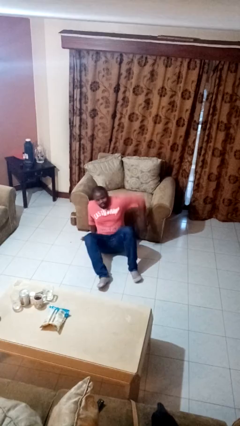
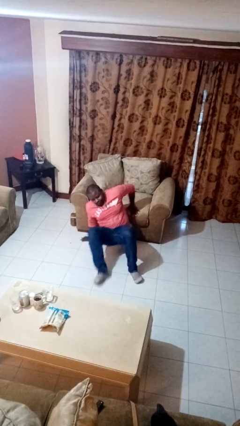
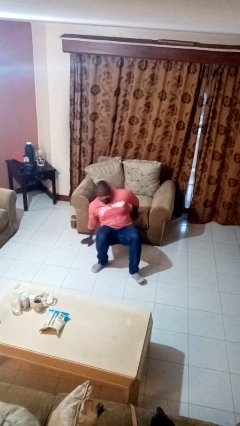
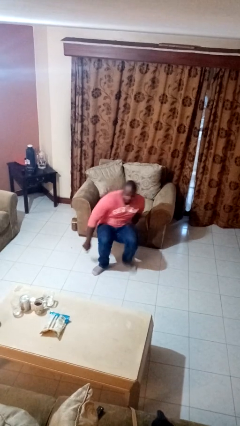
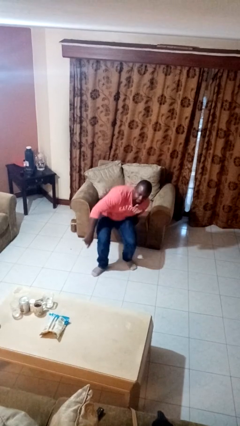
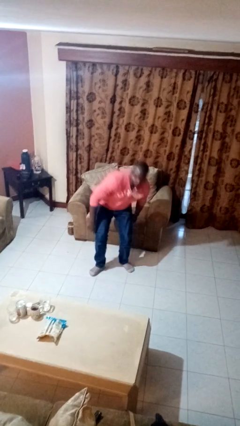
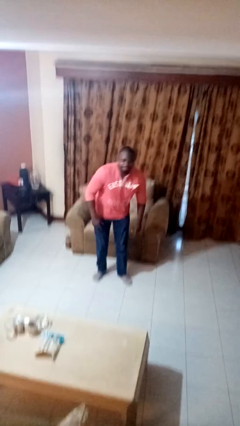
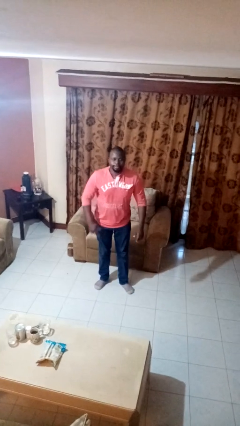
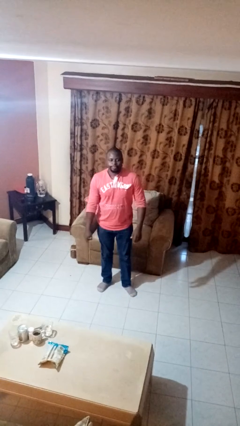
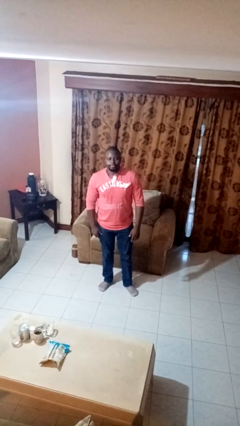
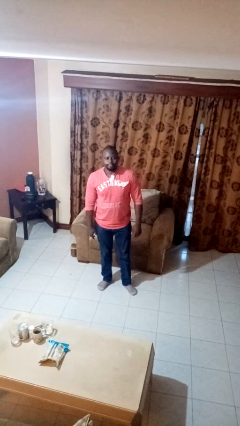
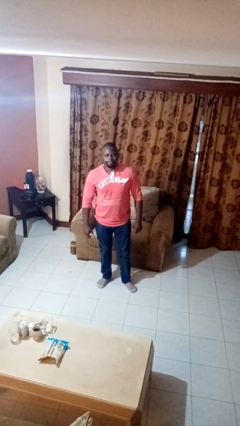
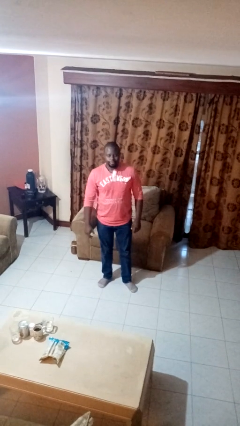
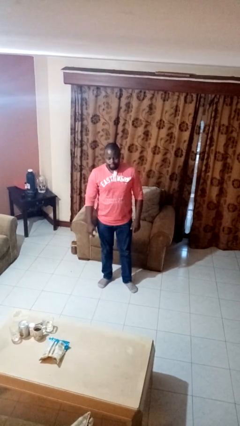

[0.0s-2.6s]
person stands up from floor

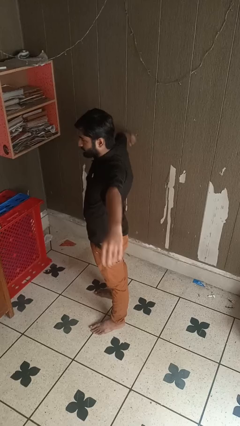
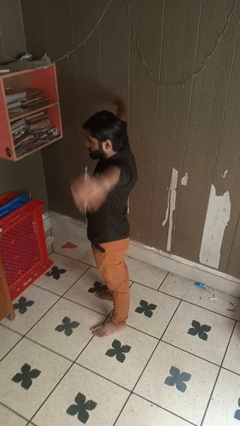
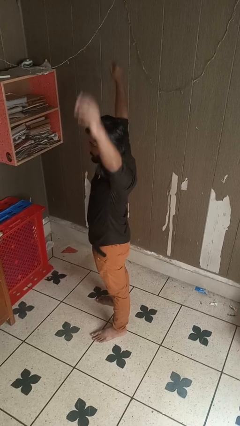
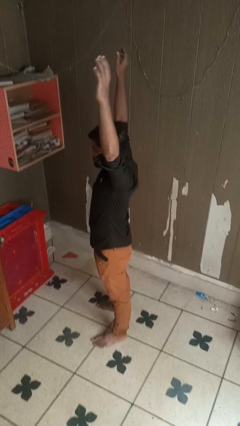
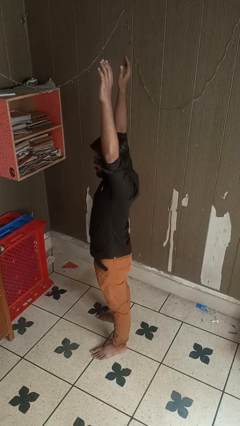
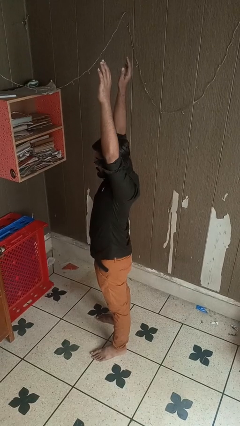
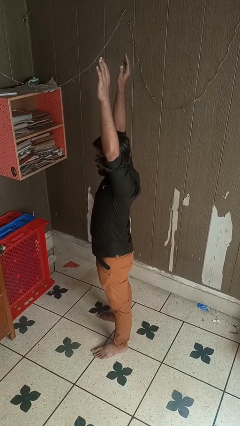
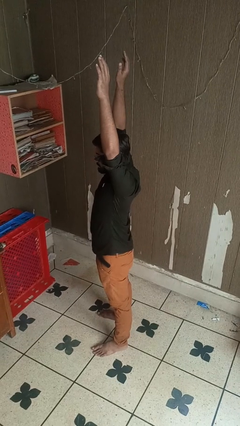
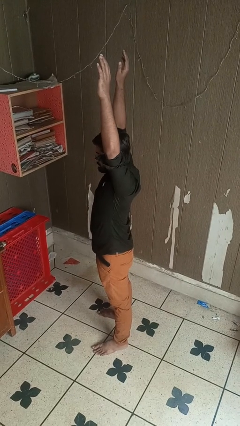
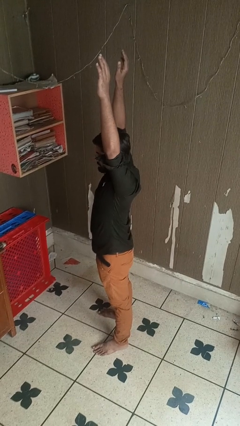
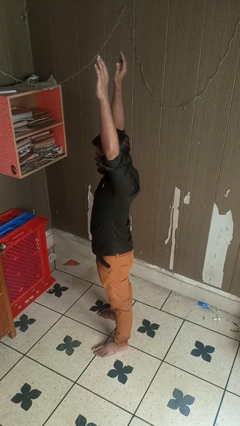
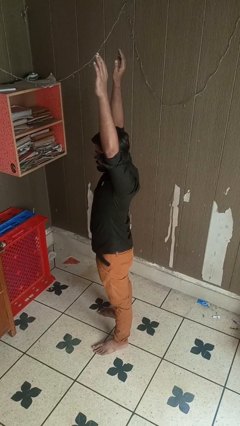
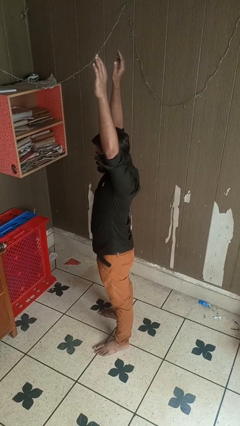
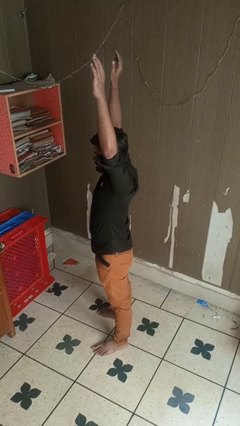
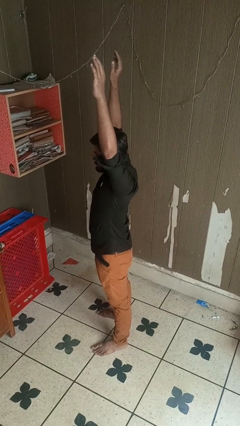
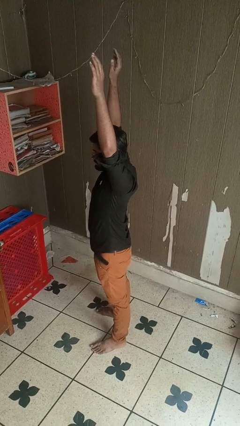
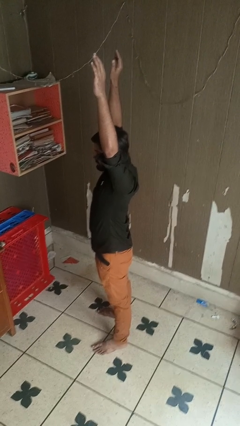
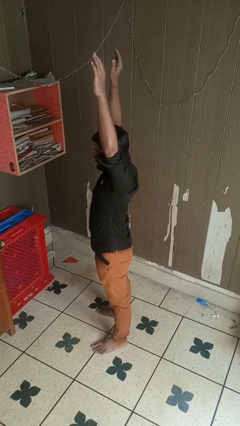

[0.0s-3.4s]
person stretches arms over head

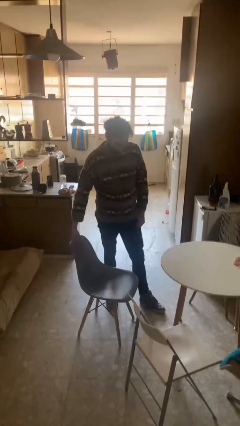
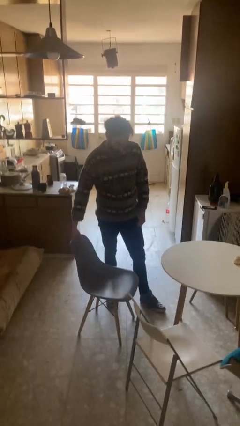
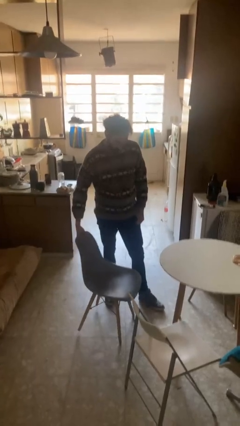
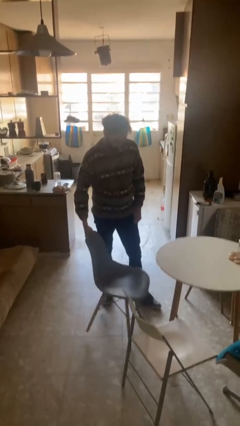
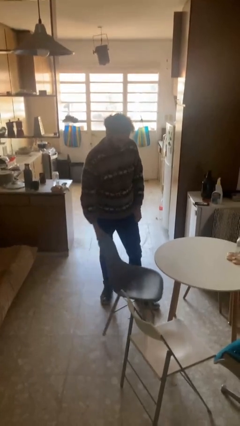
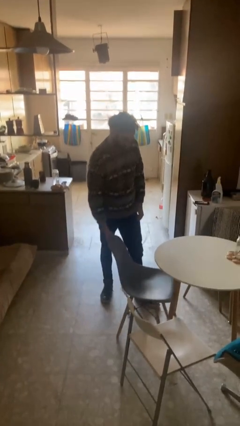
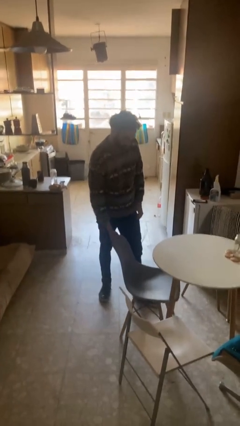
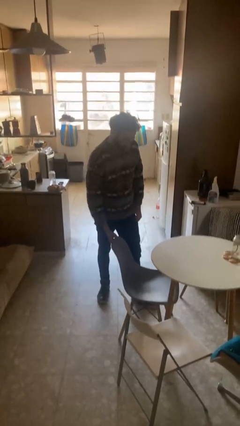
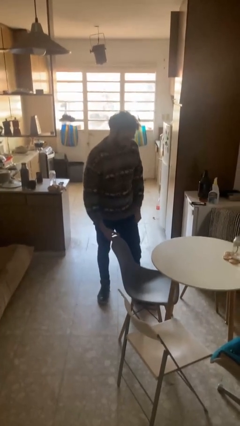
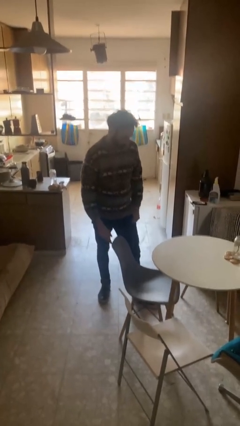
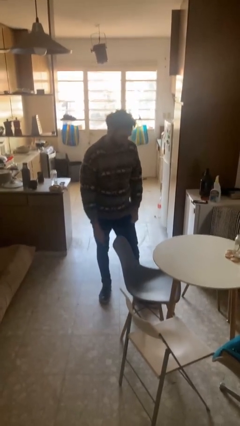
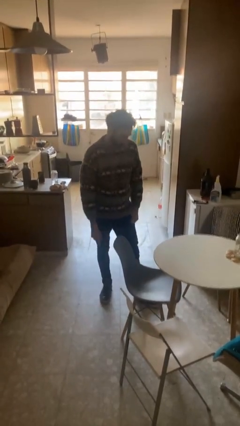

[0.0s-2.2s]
person pushes in chair

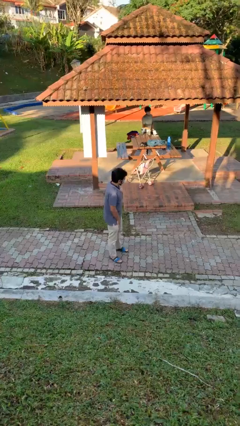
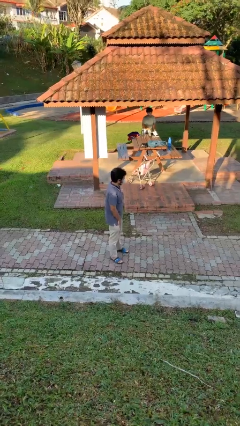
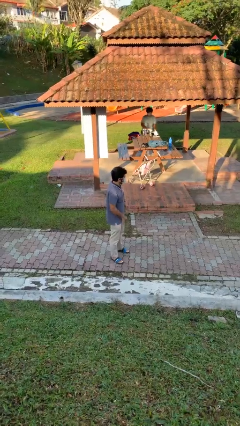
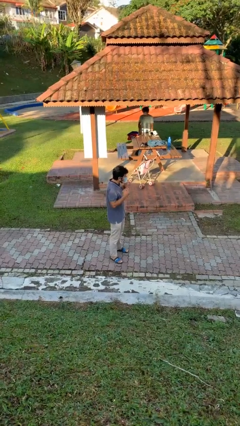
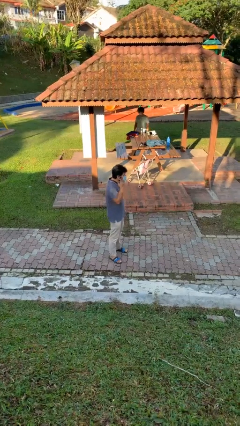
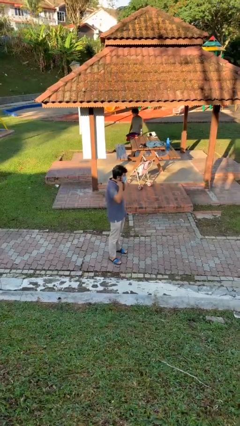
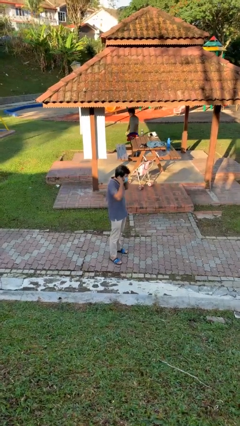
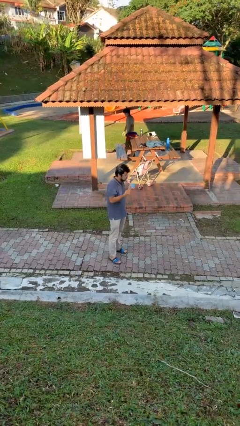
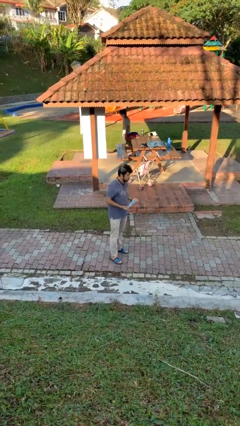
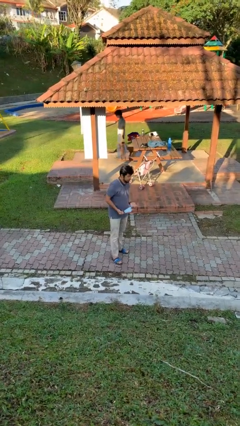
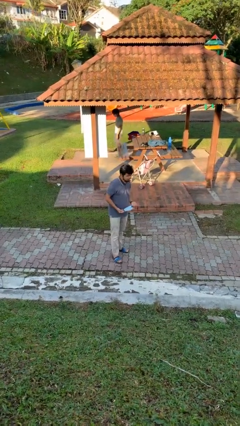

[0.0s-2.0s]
person takes off facemask

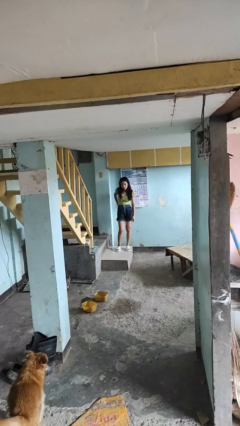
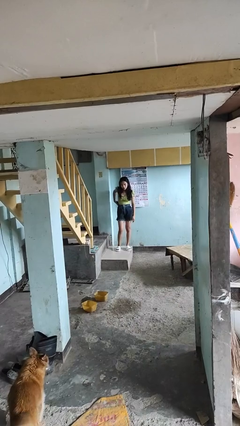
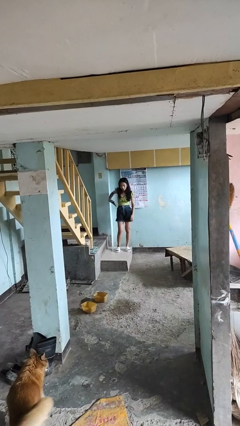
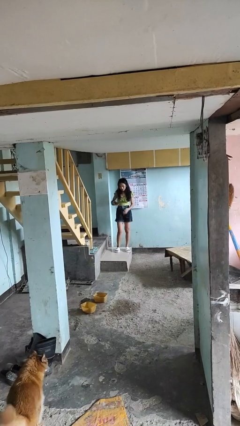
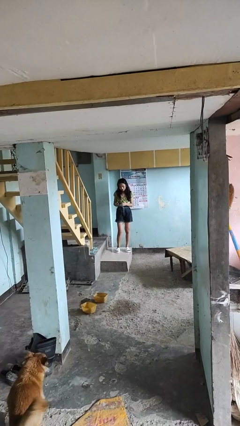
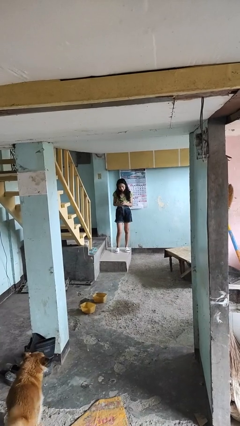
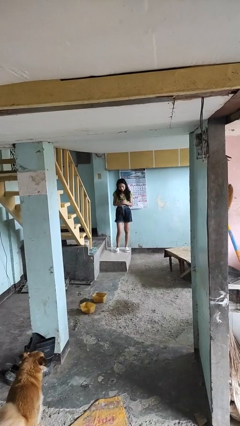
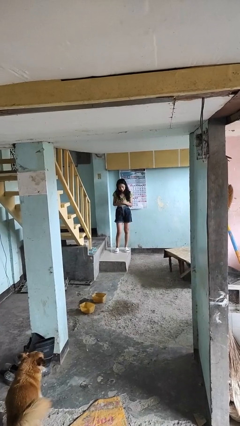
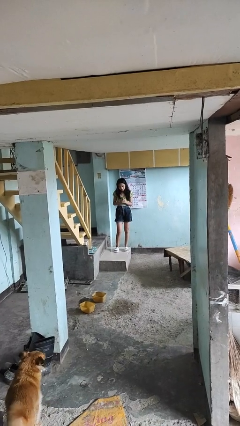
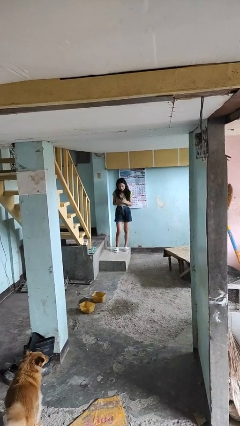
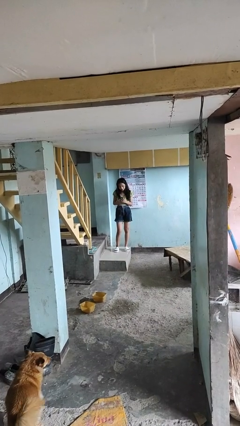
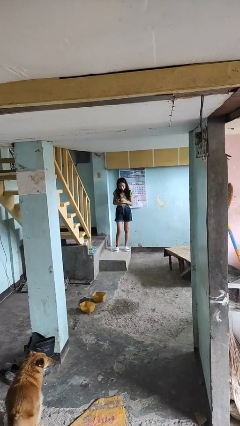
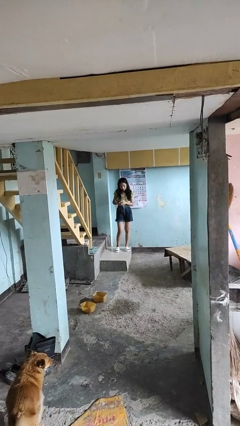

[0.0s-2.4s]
person takes phone from pocket

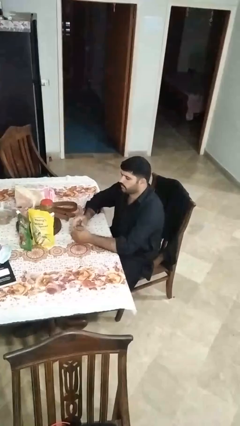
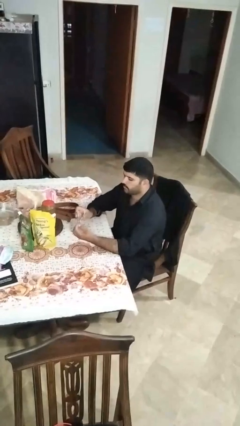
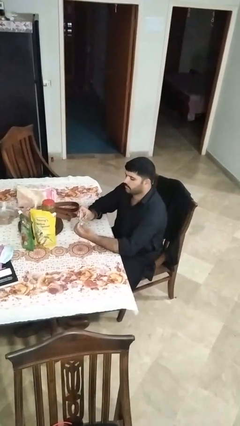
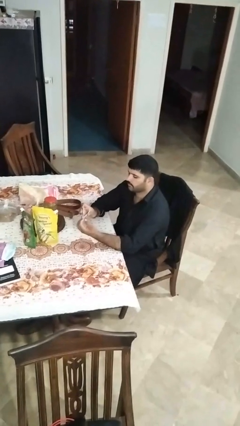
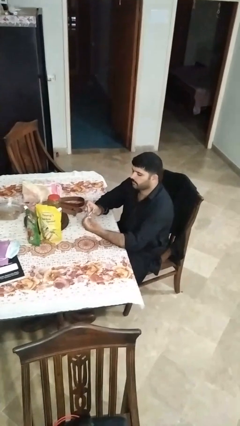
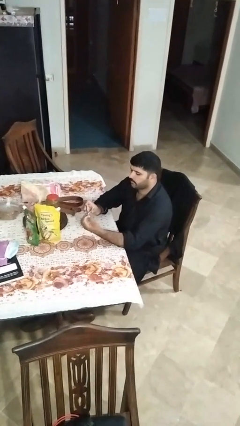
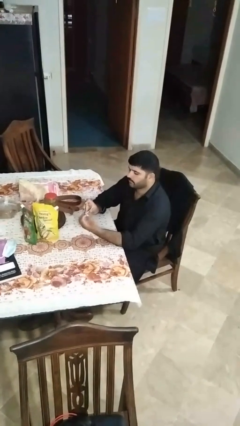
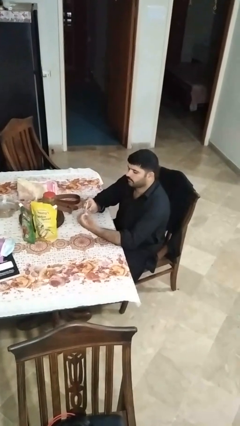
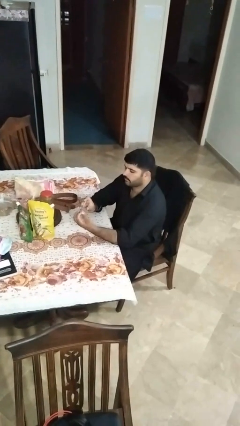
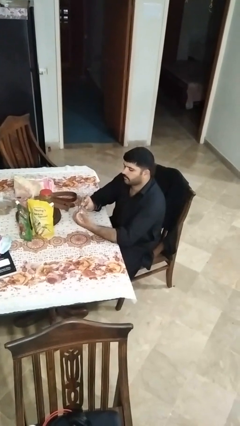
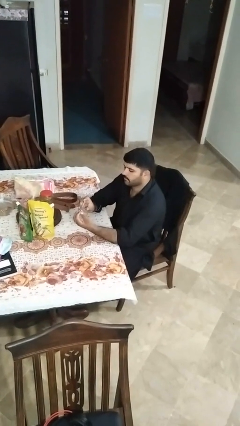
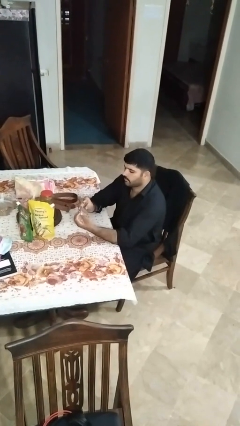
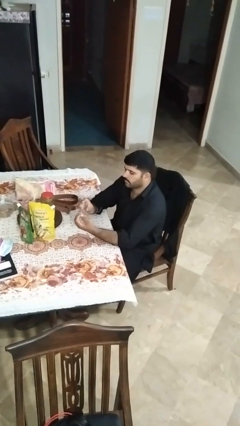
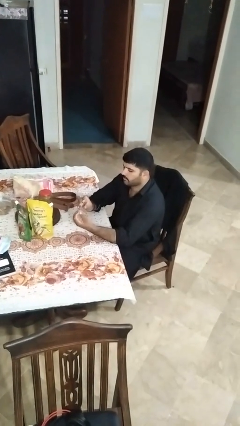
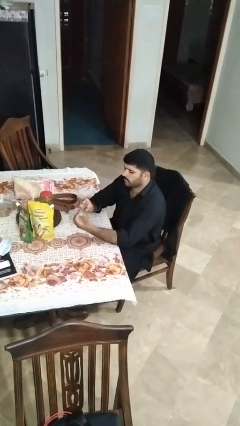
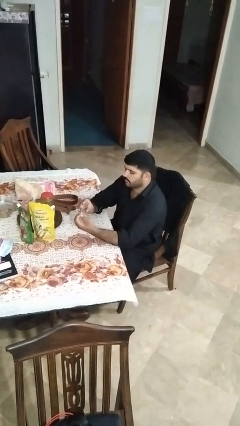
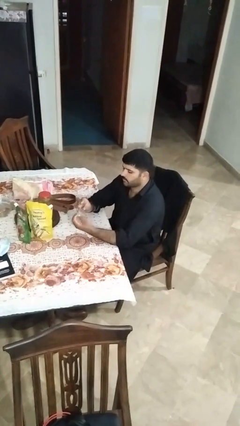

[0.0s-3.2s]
person clips fingernails

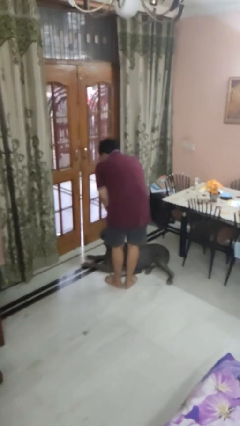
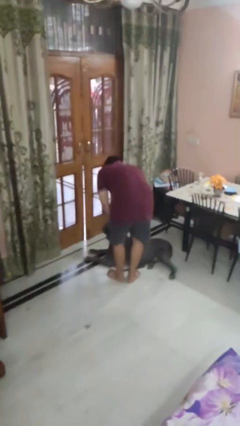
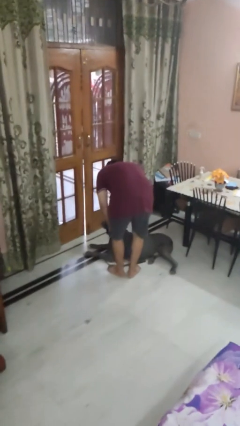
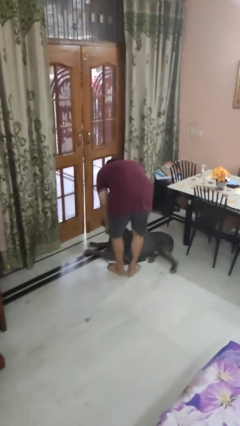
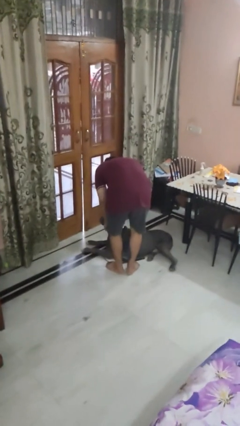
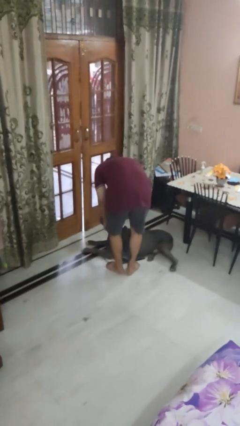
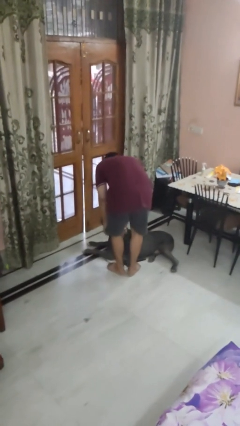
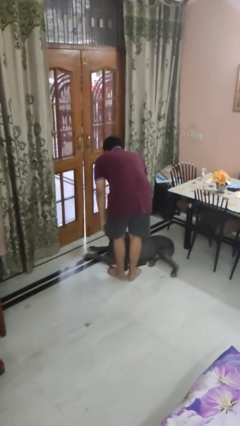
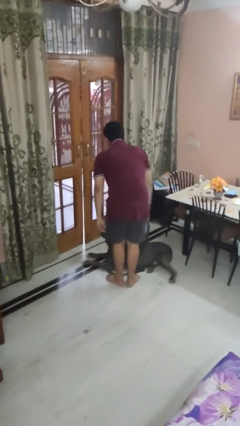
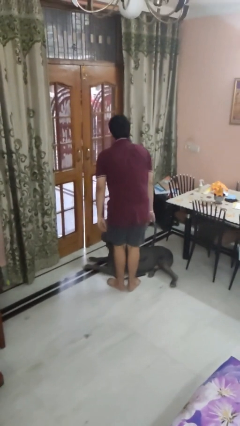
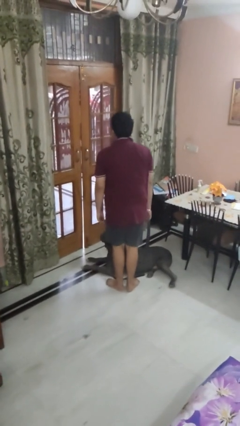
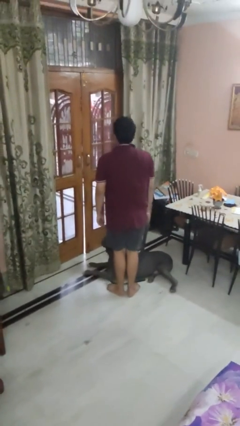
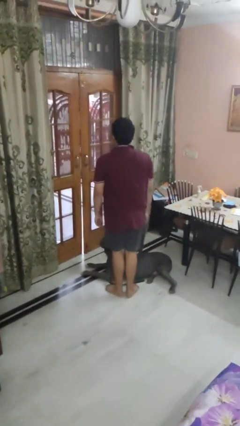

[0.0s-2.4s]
person unattaches leash from dog
